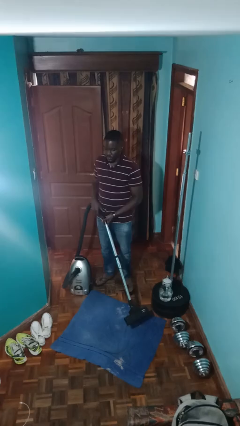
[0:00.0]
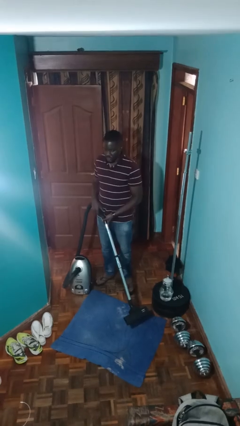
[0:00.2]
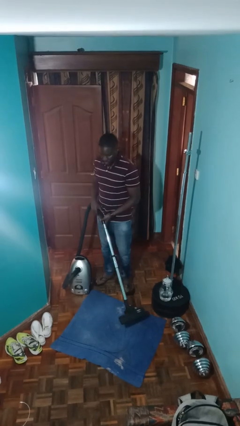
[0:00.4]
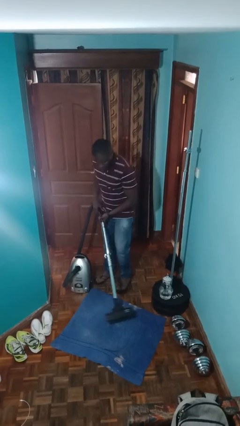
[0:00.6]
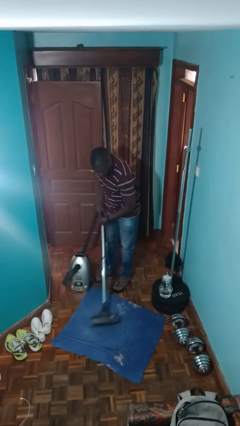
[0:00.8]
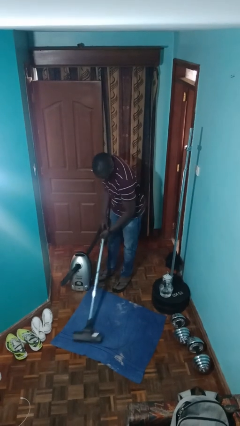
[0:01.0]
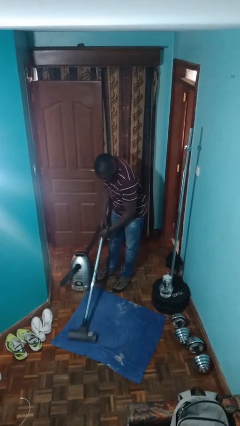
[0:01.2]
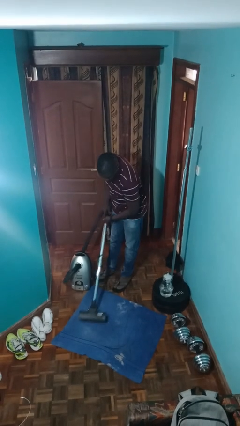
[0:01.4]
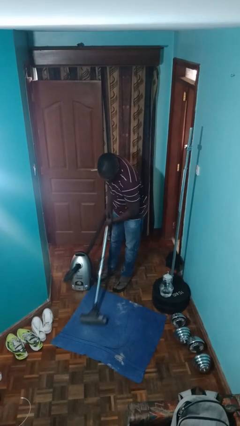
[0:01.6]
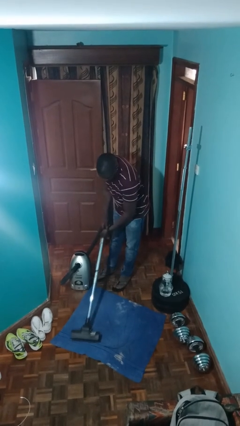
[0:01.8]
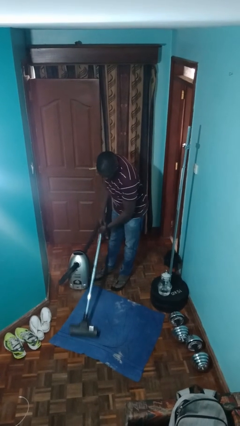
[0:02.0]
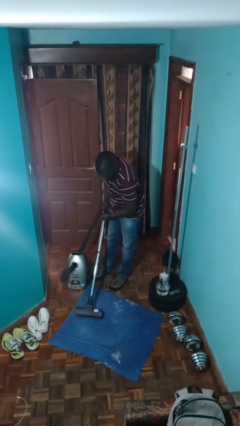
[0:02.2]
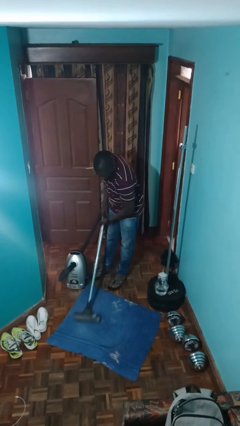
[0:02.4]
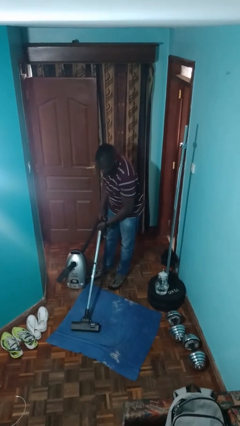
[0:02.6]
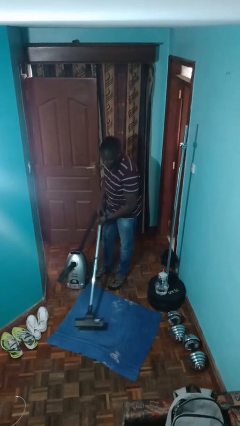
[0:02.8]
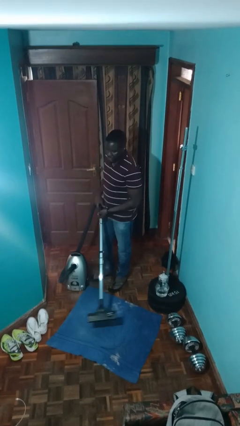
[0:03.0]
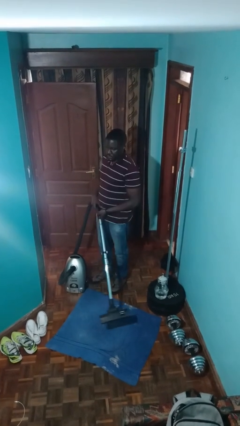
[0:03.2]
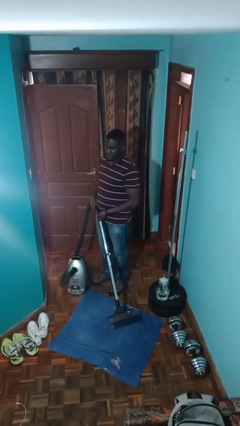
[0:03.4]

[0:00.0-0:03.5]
person vacuums carpet

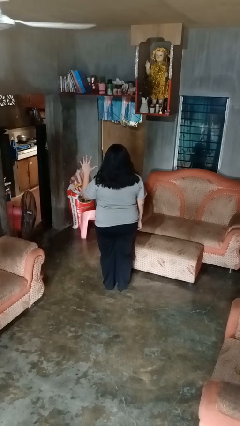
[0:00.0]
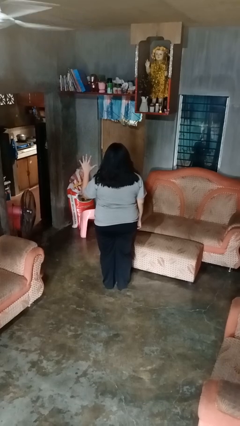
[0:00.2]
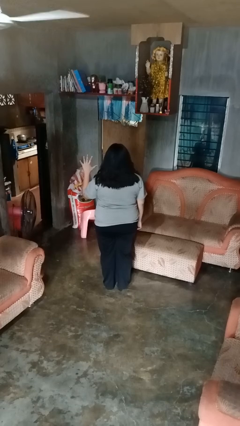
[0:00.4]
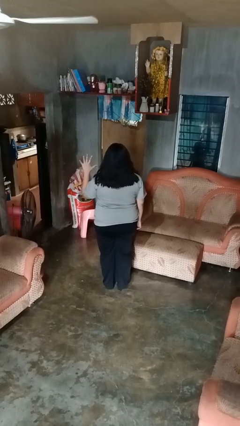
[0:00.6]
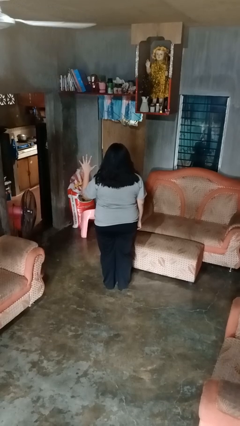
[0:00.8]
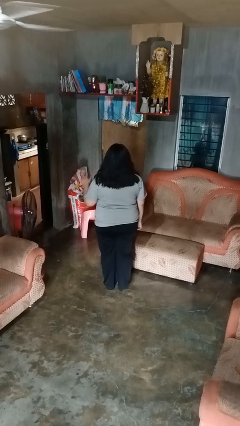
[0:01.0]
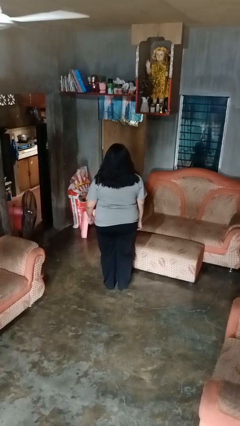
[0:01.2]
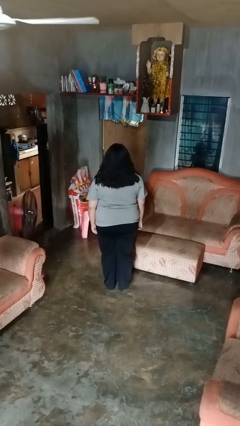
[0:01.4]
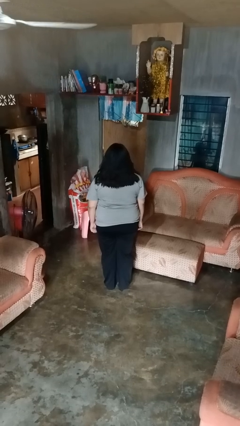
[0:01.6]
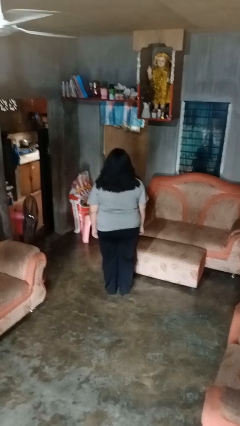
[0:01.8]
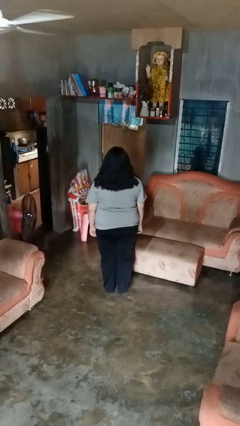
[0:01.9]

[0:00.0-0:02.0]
person gestures number five

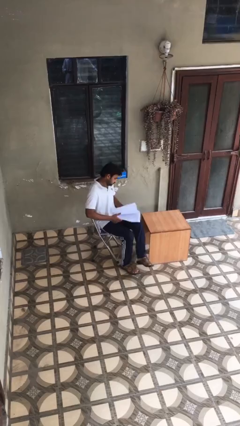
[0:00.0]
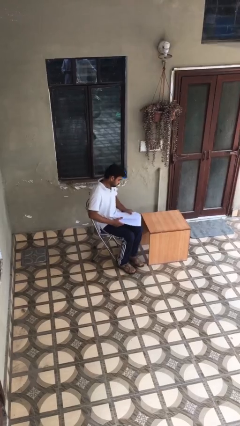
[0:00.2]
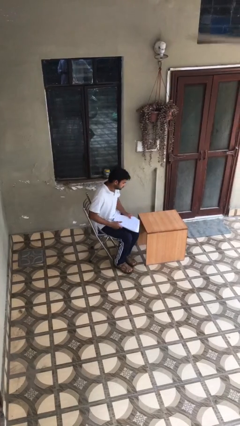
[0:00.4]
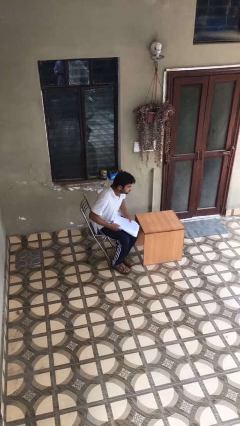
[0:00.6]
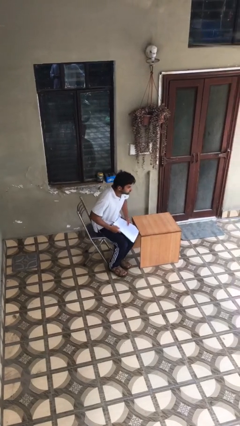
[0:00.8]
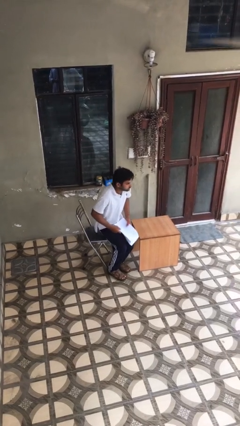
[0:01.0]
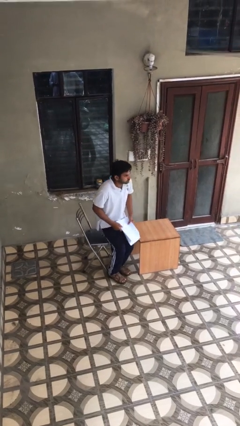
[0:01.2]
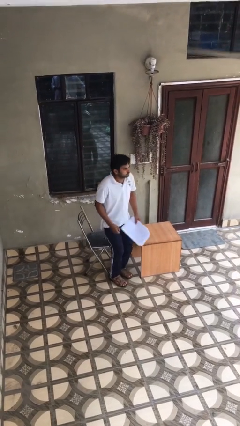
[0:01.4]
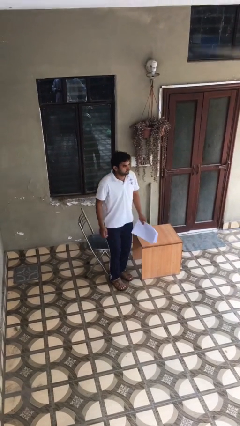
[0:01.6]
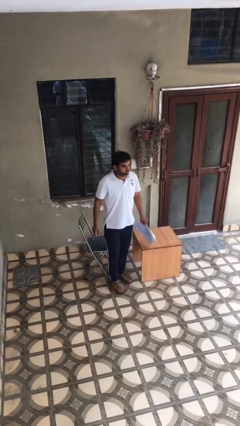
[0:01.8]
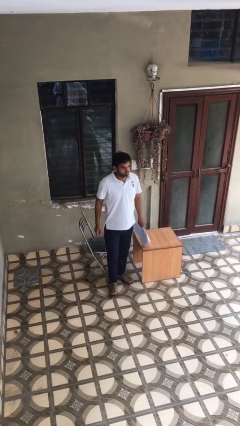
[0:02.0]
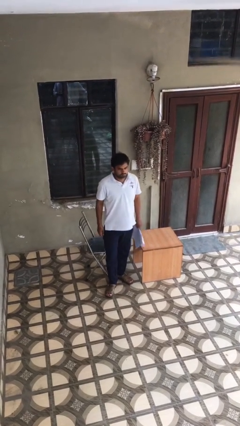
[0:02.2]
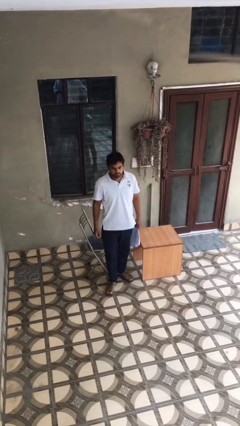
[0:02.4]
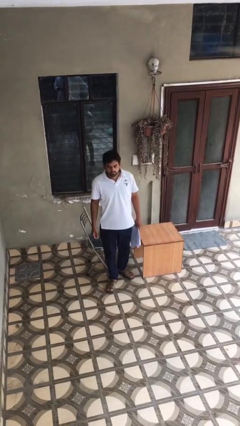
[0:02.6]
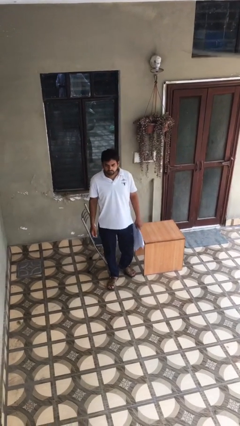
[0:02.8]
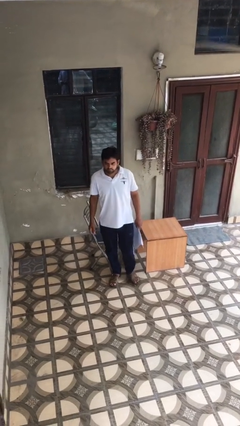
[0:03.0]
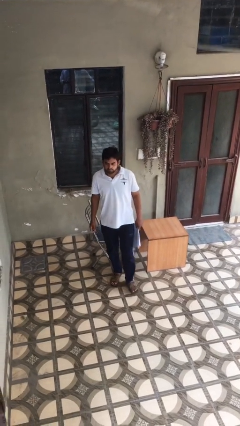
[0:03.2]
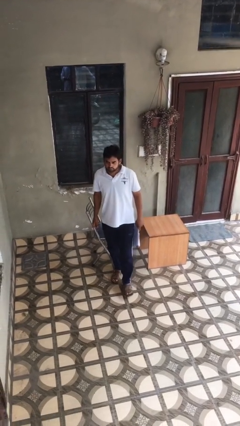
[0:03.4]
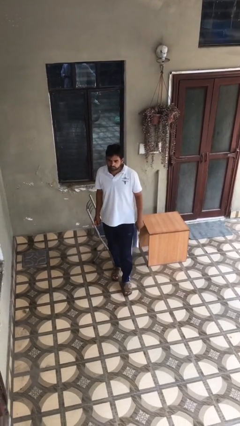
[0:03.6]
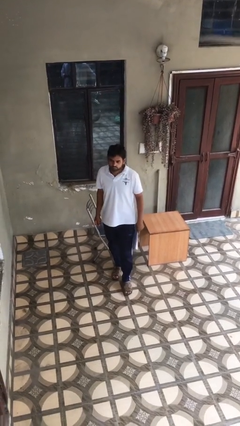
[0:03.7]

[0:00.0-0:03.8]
person stands up

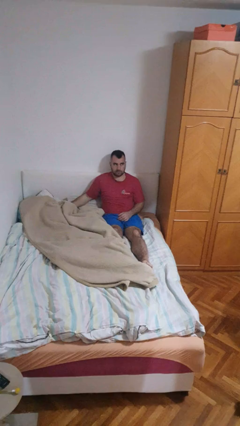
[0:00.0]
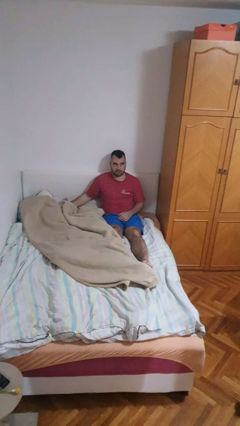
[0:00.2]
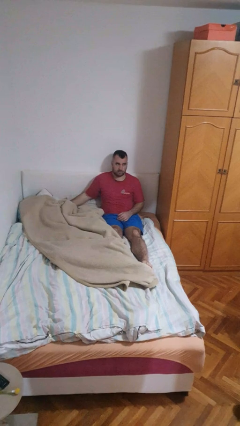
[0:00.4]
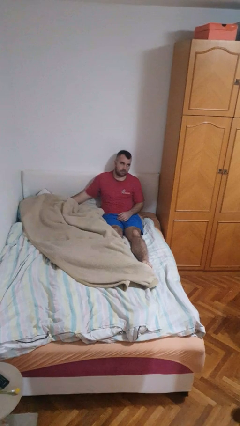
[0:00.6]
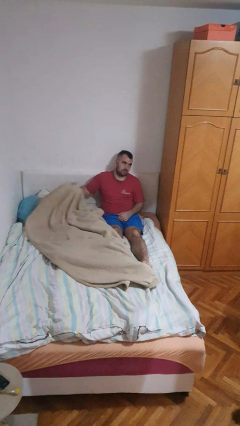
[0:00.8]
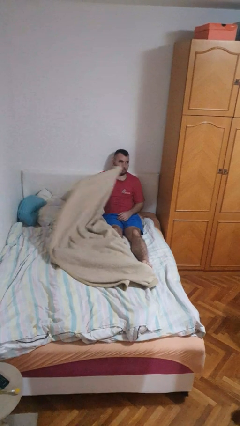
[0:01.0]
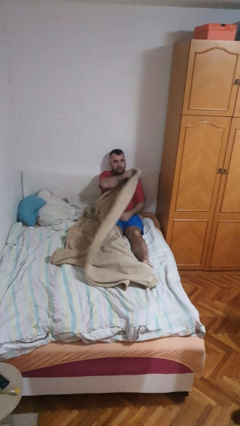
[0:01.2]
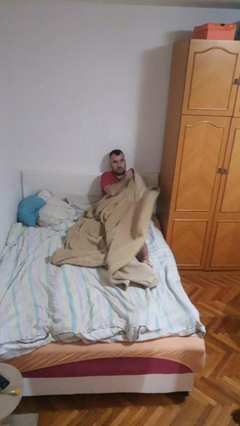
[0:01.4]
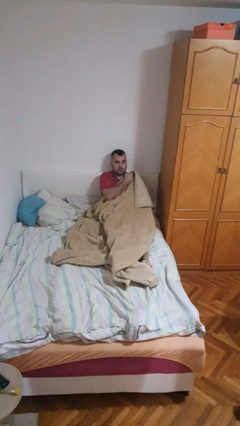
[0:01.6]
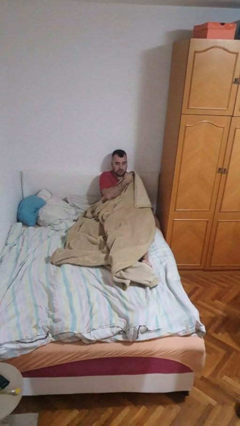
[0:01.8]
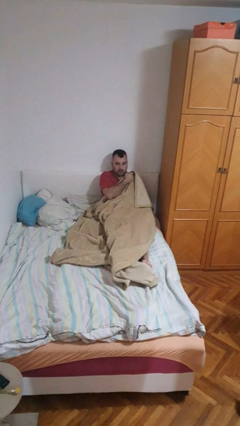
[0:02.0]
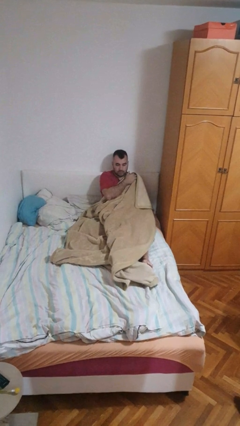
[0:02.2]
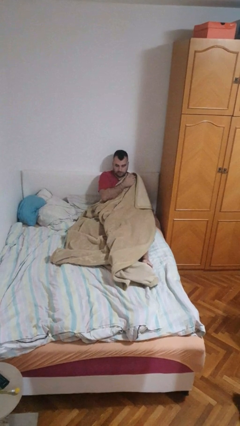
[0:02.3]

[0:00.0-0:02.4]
person covers with blanket

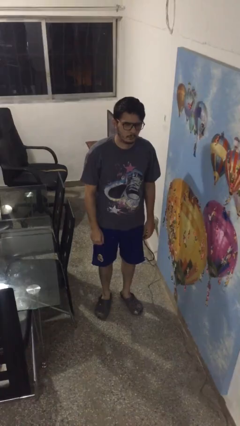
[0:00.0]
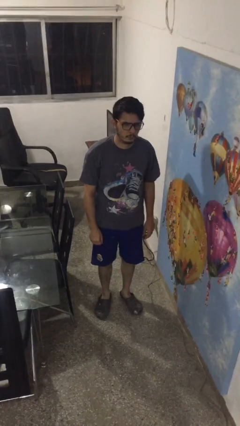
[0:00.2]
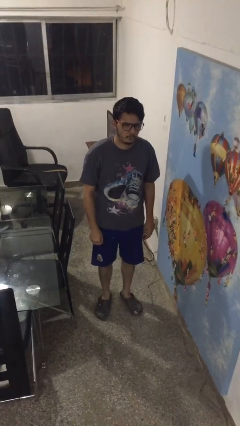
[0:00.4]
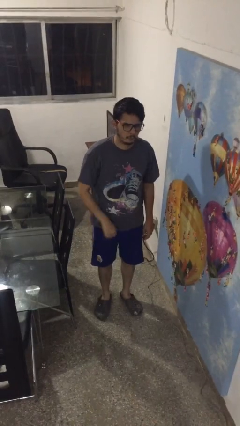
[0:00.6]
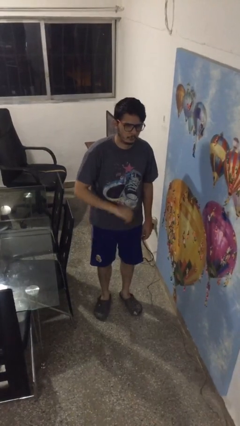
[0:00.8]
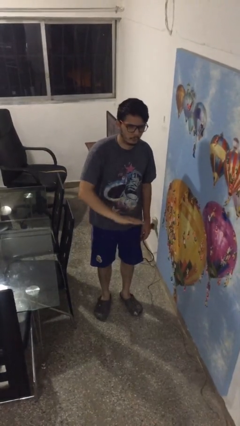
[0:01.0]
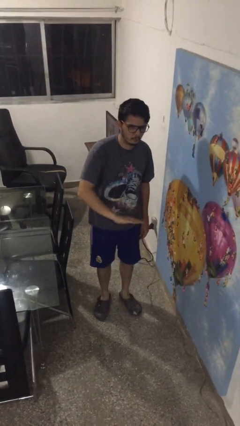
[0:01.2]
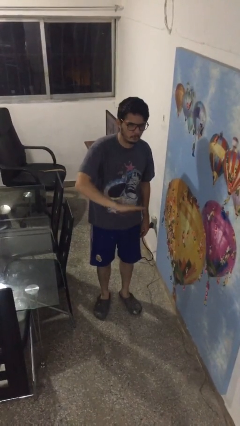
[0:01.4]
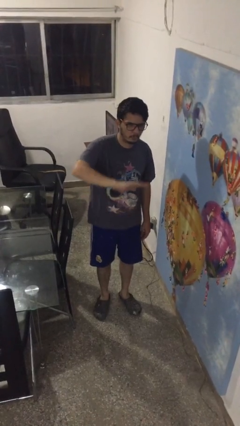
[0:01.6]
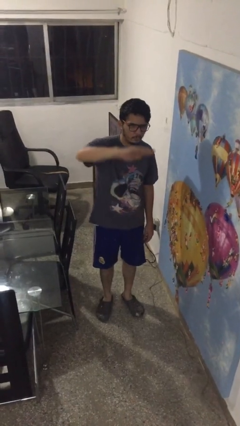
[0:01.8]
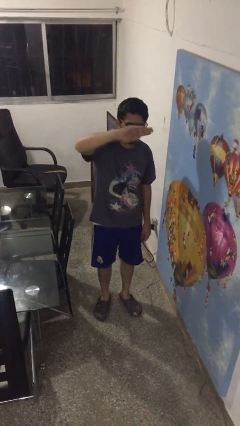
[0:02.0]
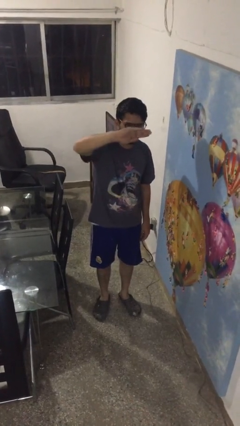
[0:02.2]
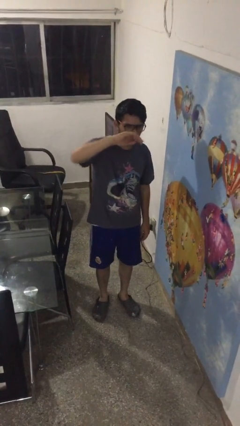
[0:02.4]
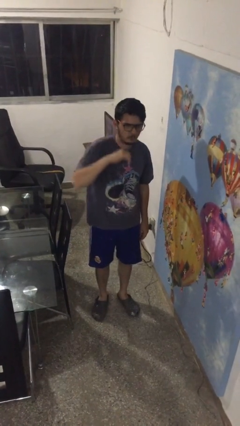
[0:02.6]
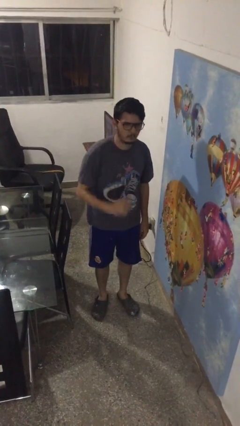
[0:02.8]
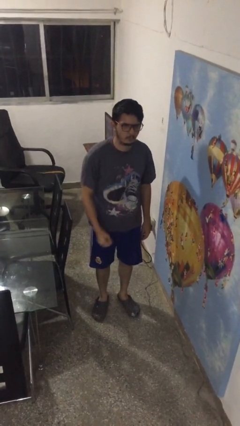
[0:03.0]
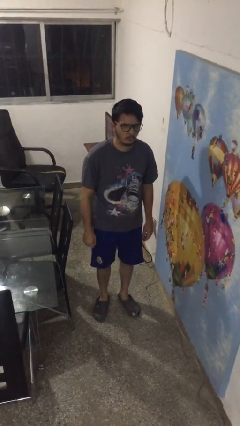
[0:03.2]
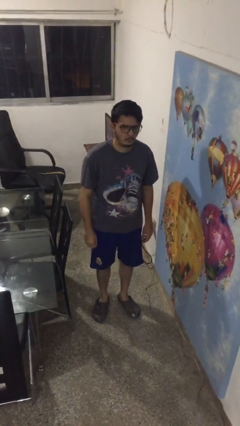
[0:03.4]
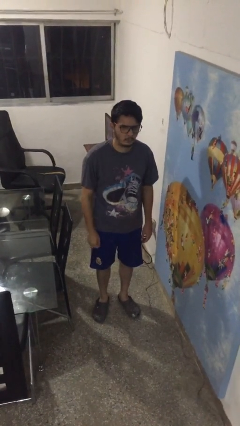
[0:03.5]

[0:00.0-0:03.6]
person gestures swipe up

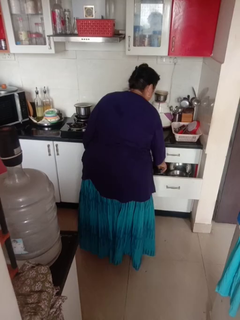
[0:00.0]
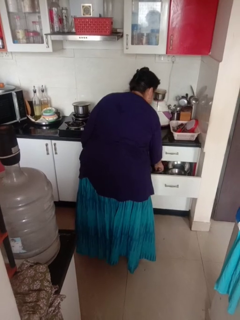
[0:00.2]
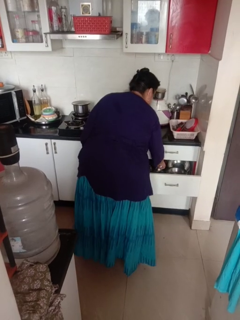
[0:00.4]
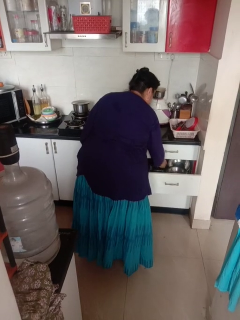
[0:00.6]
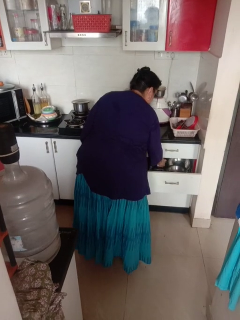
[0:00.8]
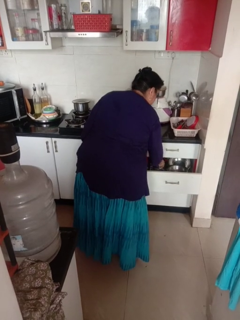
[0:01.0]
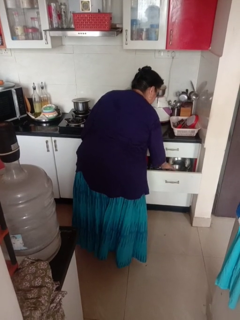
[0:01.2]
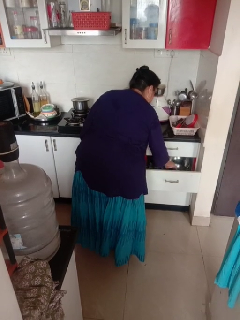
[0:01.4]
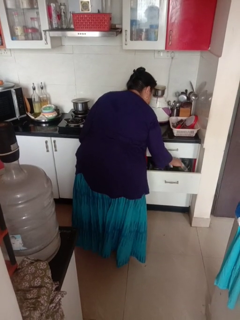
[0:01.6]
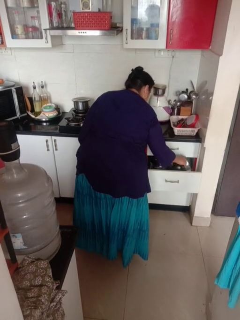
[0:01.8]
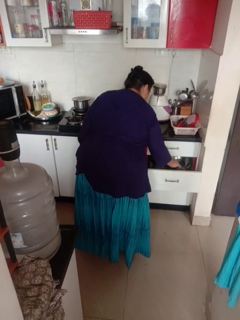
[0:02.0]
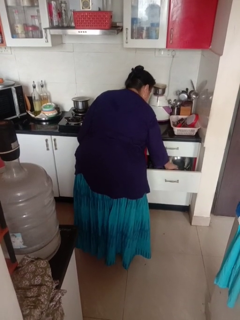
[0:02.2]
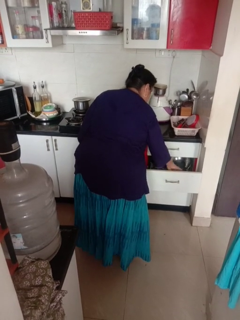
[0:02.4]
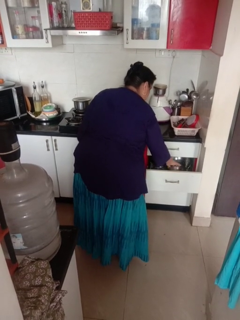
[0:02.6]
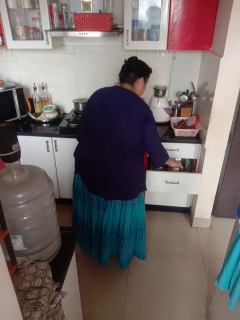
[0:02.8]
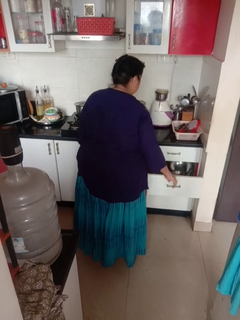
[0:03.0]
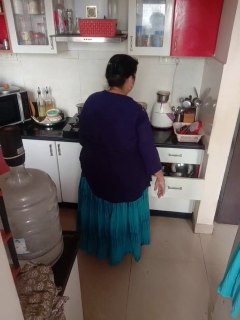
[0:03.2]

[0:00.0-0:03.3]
person searches in kitchen drawer
